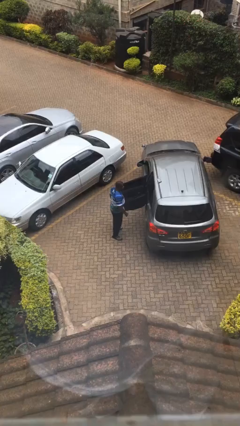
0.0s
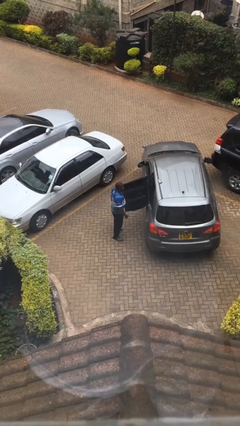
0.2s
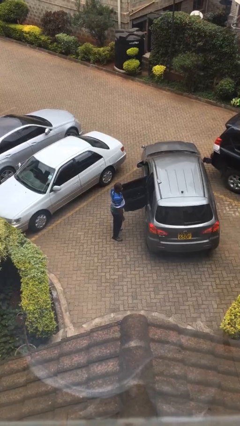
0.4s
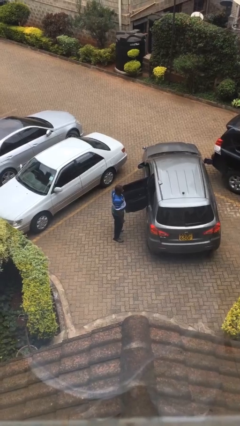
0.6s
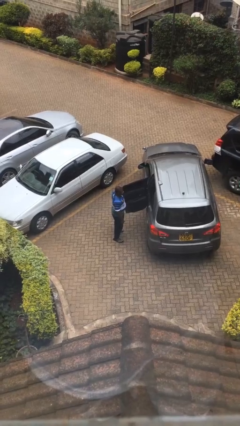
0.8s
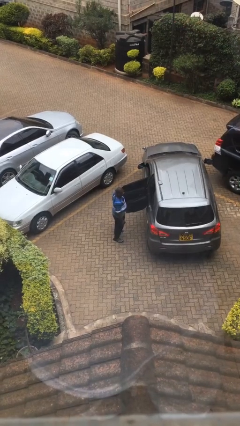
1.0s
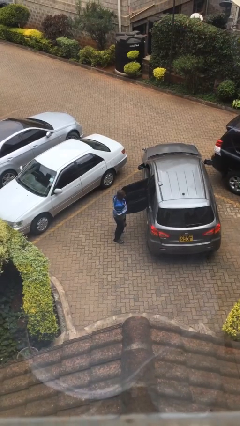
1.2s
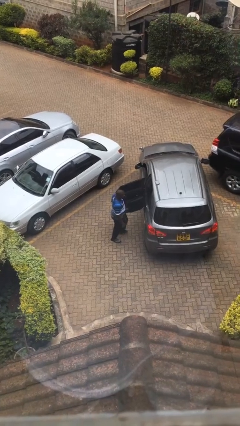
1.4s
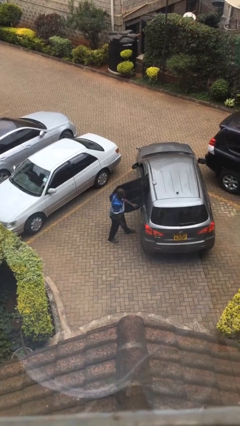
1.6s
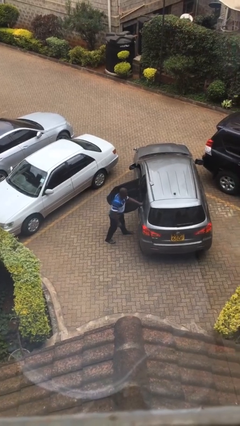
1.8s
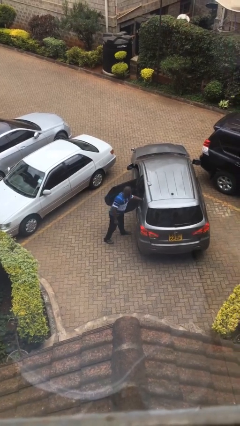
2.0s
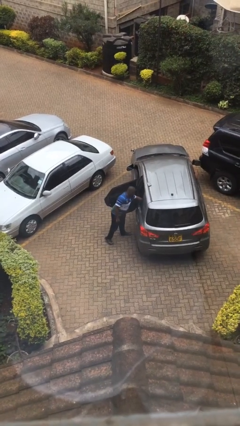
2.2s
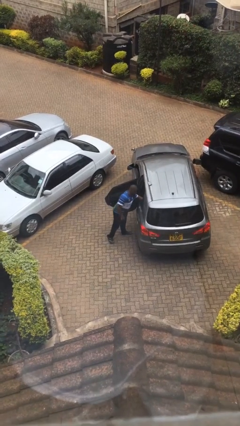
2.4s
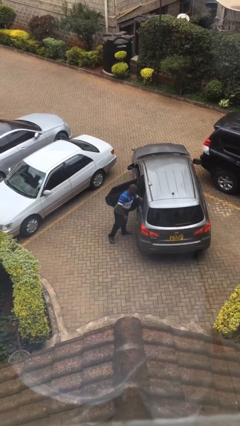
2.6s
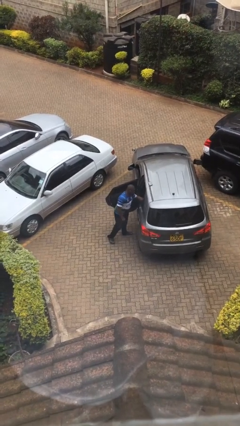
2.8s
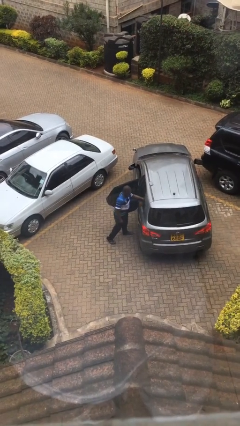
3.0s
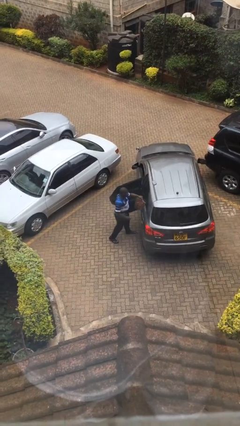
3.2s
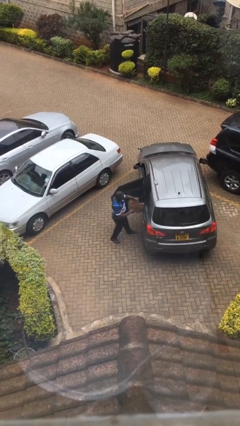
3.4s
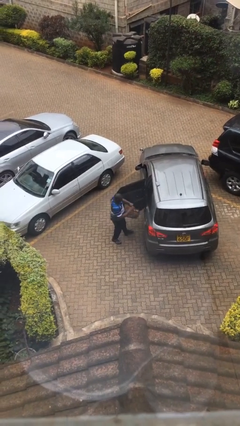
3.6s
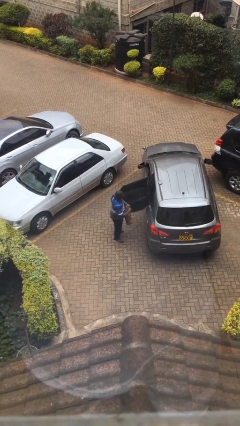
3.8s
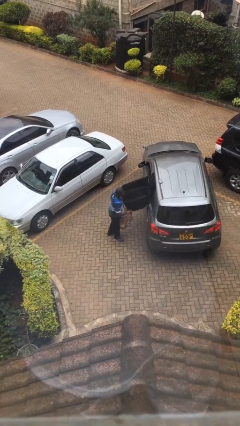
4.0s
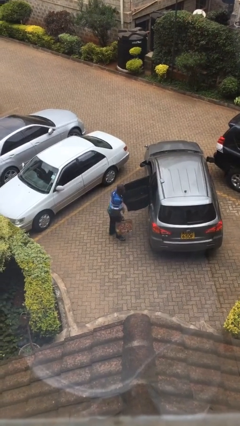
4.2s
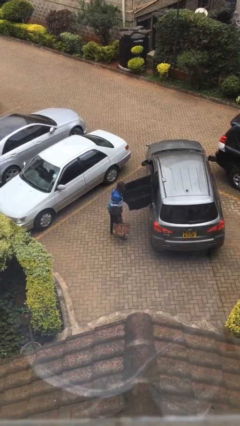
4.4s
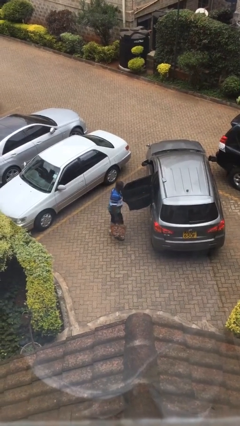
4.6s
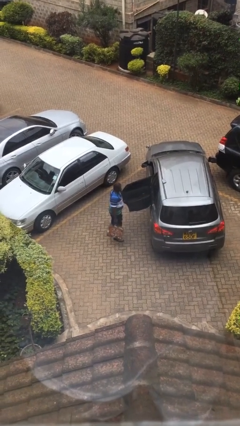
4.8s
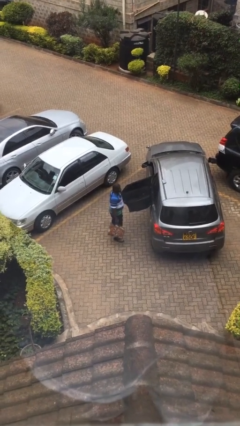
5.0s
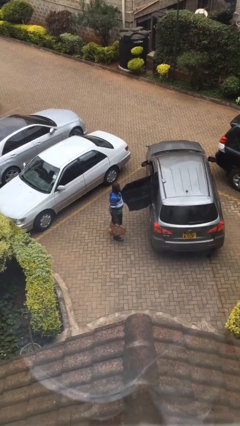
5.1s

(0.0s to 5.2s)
person unloads car

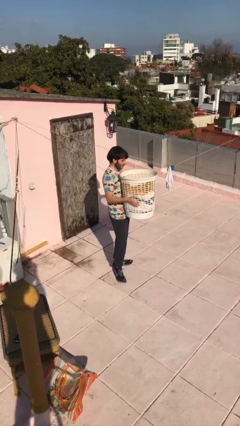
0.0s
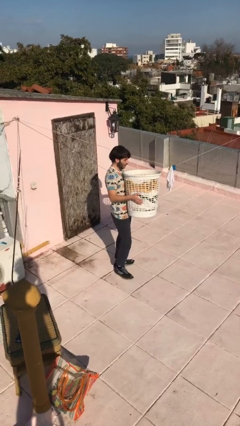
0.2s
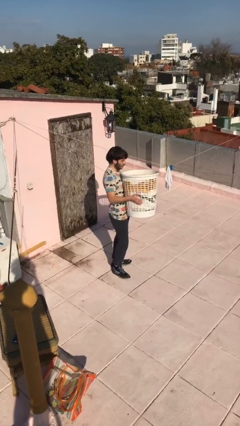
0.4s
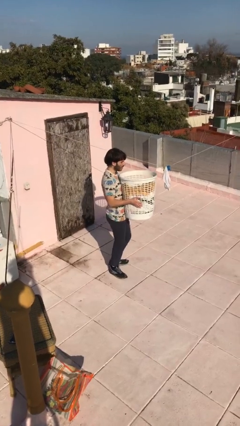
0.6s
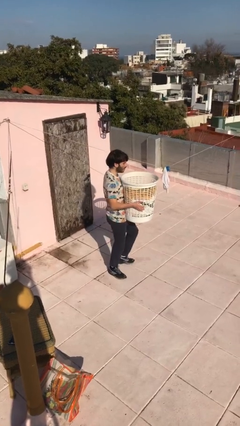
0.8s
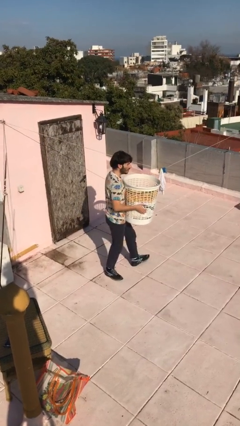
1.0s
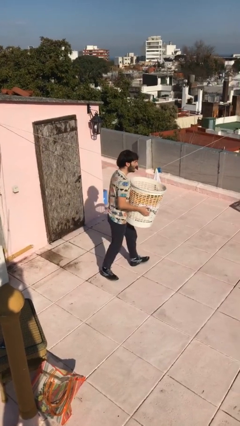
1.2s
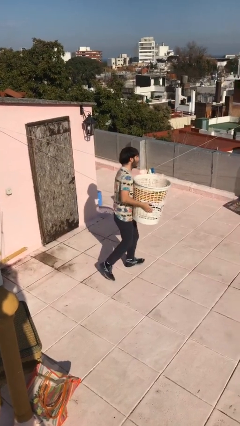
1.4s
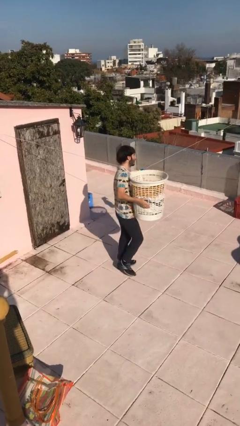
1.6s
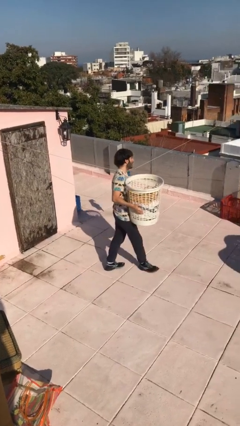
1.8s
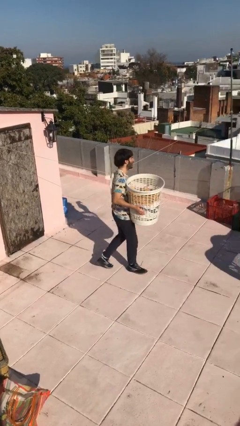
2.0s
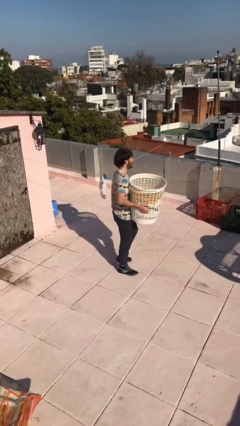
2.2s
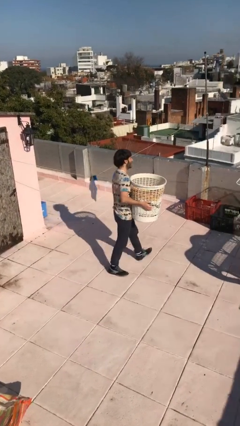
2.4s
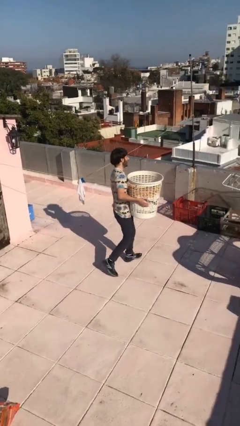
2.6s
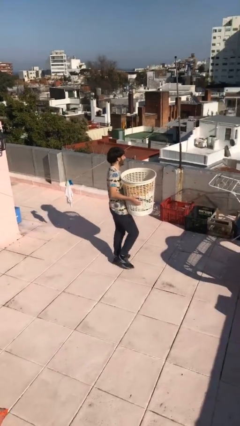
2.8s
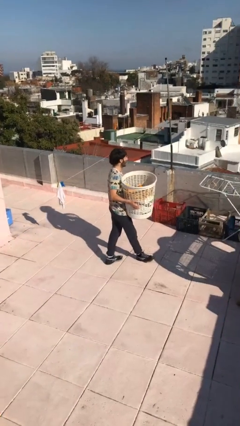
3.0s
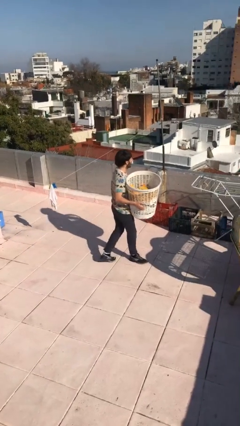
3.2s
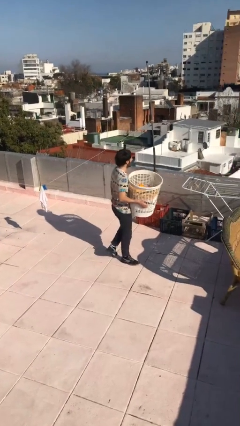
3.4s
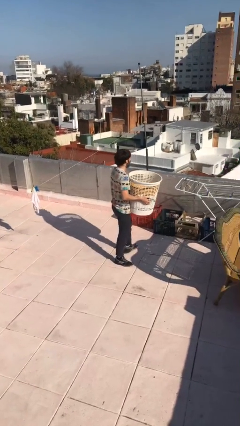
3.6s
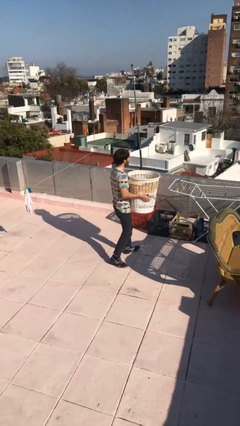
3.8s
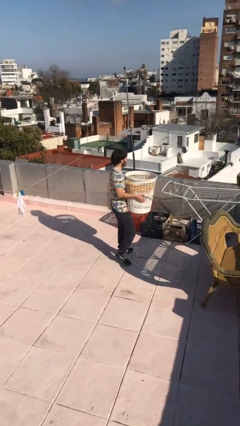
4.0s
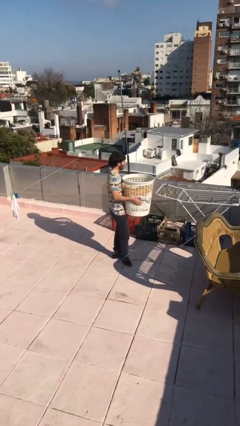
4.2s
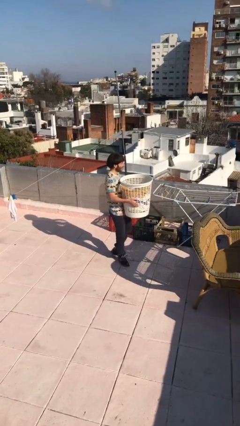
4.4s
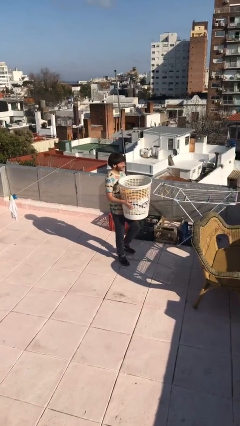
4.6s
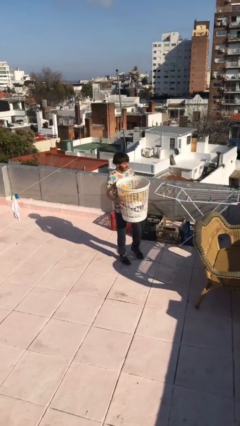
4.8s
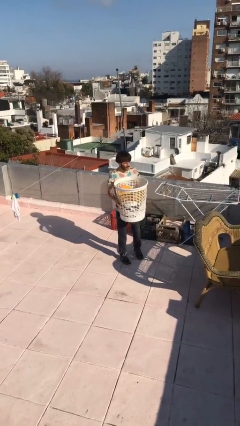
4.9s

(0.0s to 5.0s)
person carries laundry basket

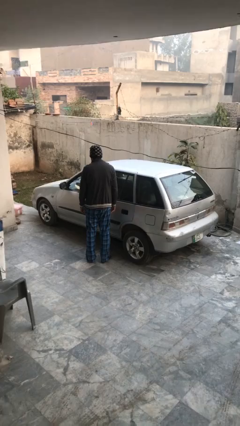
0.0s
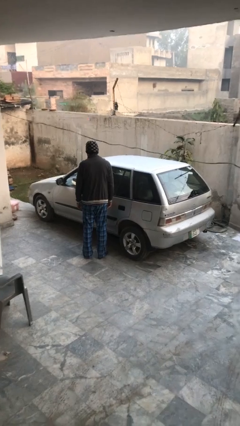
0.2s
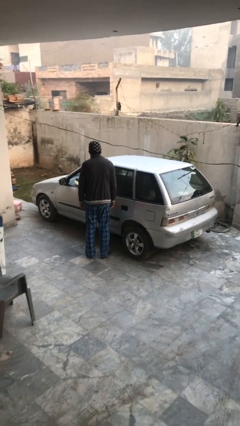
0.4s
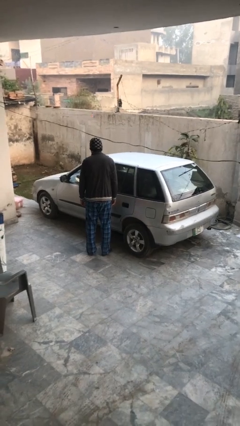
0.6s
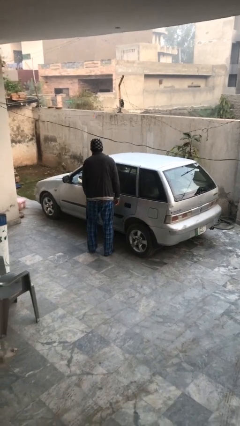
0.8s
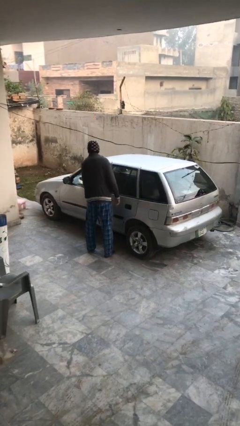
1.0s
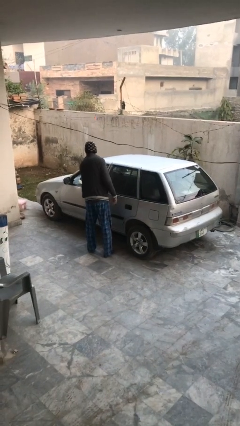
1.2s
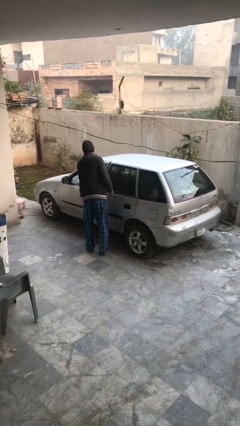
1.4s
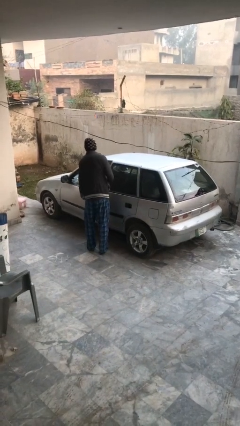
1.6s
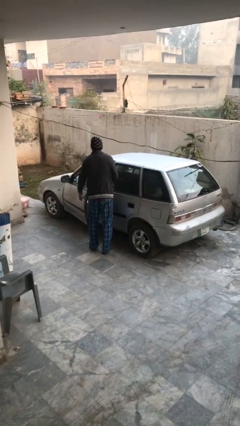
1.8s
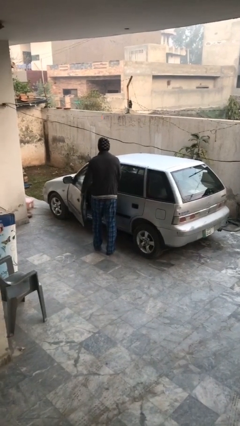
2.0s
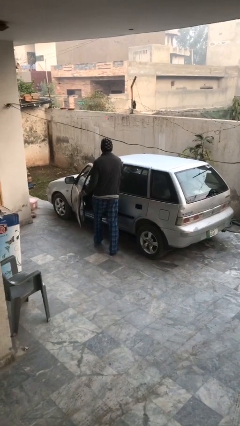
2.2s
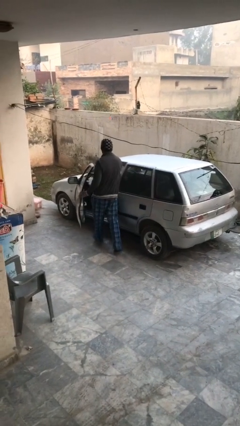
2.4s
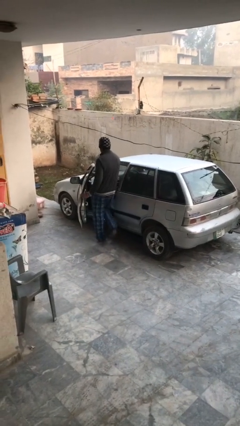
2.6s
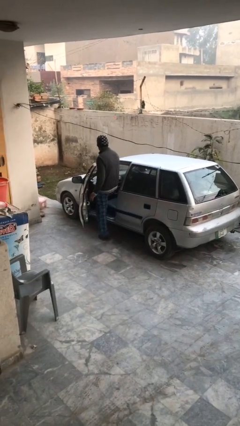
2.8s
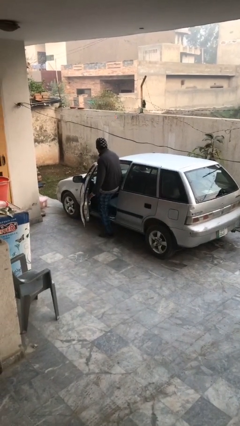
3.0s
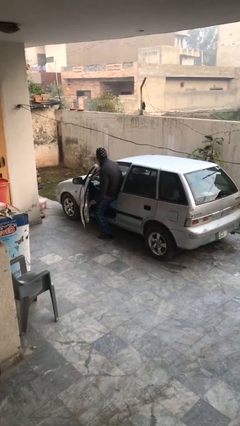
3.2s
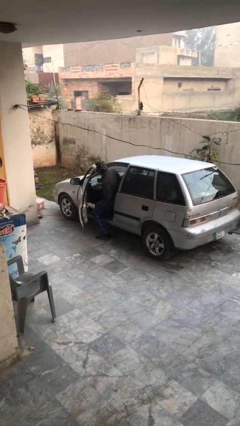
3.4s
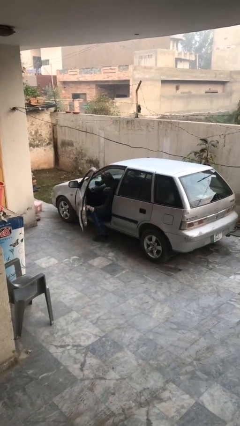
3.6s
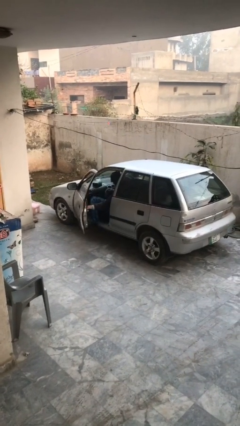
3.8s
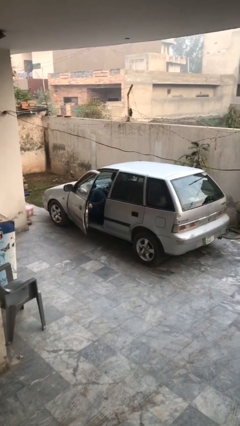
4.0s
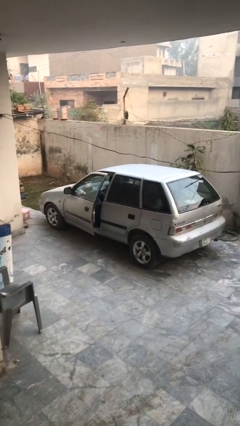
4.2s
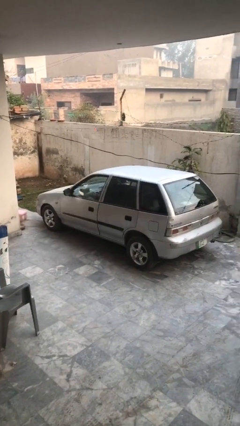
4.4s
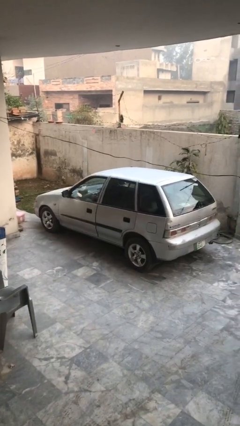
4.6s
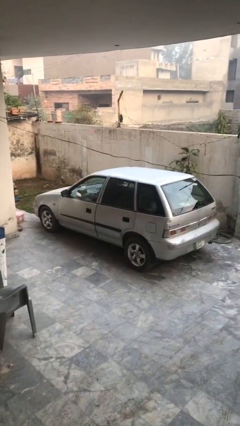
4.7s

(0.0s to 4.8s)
car picks up person

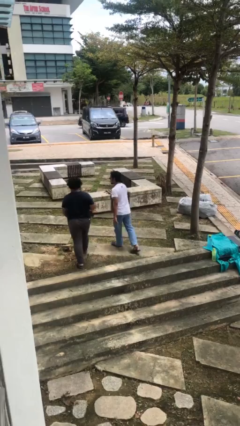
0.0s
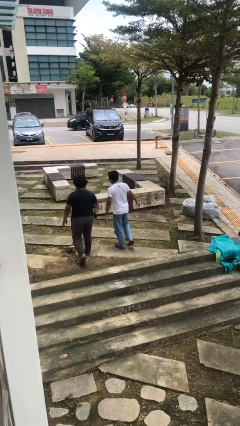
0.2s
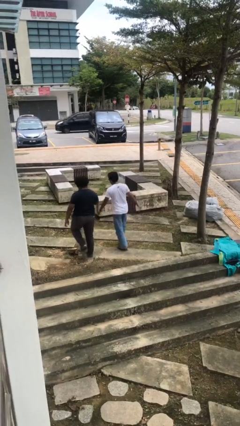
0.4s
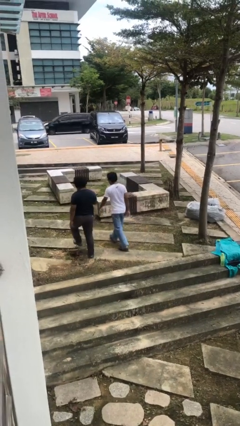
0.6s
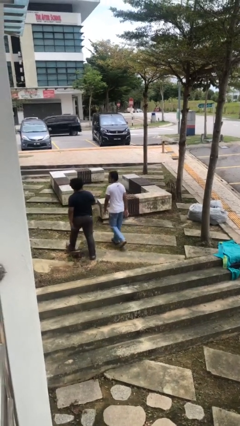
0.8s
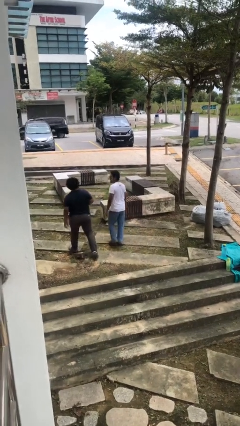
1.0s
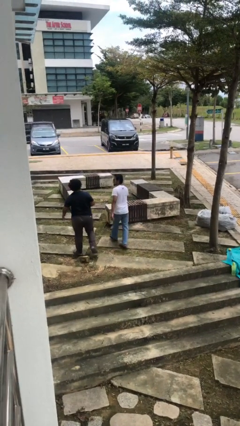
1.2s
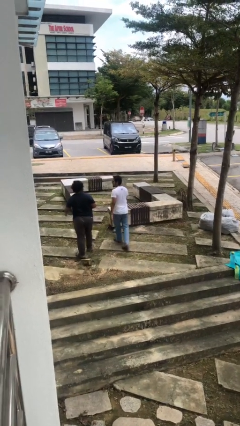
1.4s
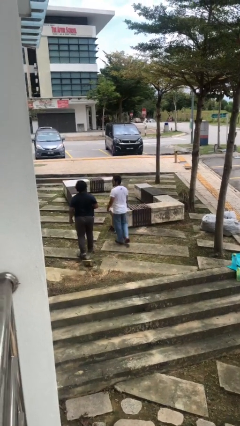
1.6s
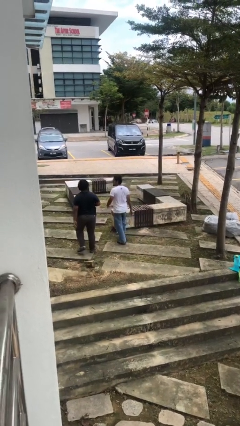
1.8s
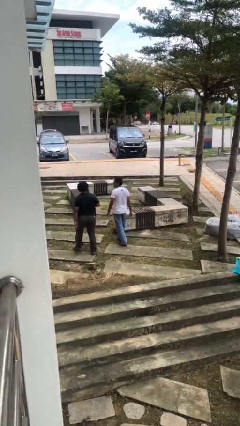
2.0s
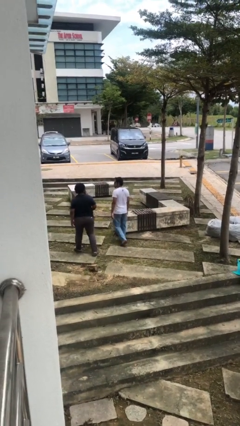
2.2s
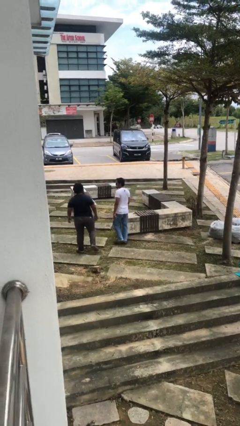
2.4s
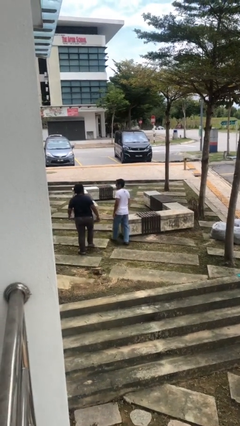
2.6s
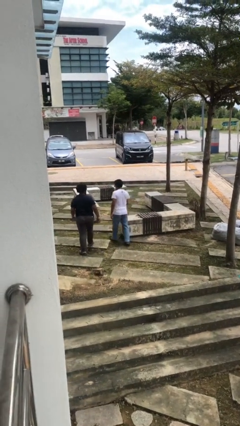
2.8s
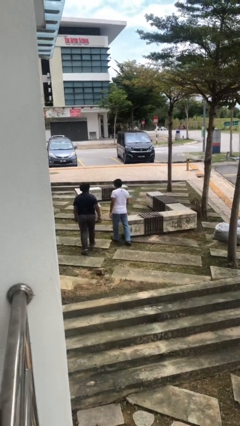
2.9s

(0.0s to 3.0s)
person talks to person
